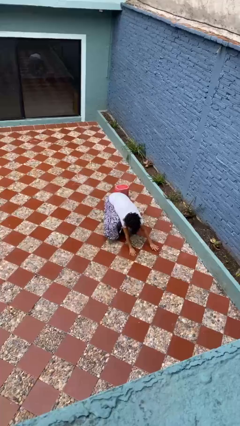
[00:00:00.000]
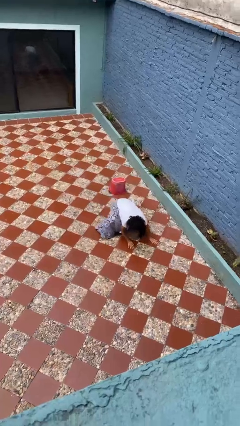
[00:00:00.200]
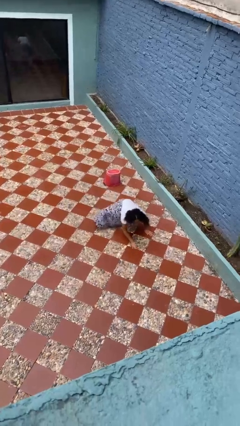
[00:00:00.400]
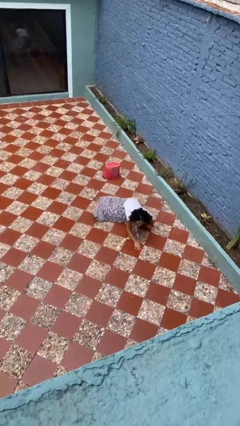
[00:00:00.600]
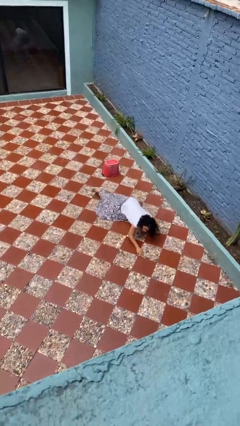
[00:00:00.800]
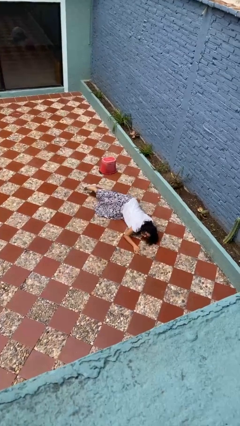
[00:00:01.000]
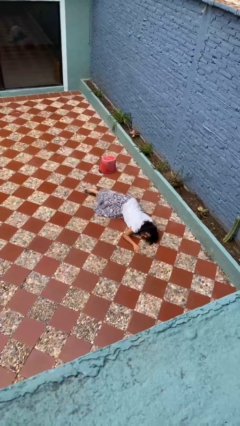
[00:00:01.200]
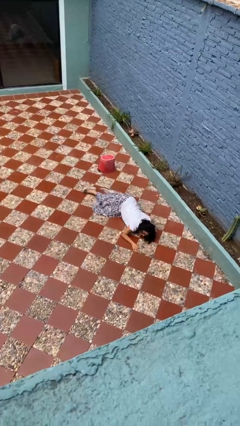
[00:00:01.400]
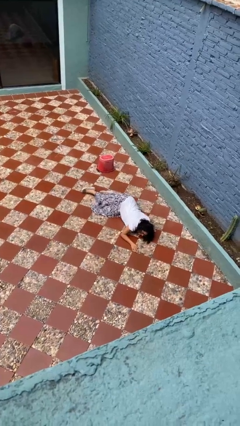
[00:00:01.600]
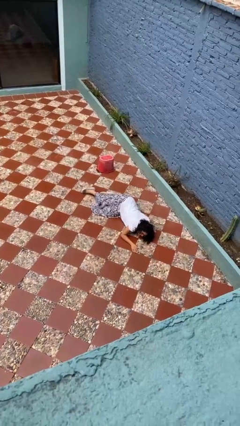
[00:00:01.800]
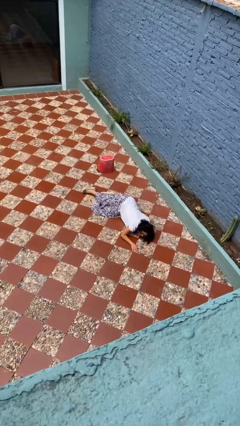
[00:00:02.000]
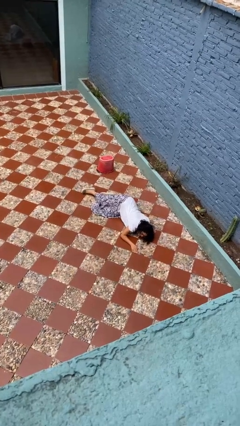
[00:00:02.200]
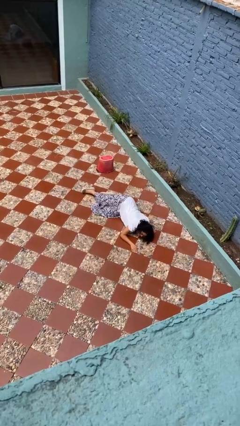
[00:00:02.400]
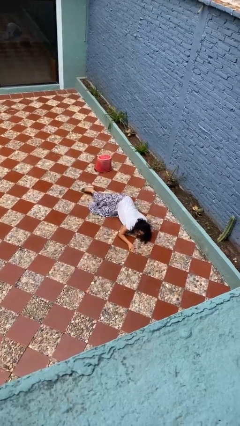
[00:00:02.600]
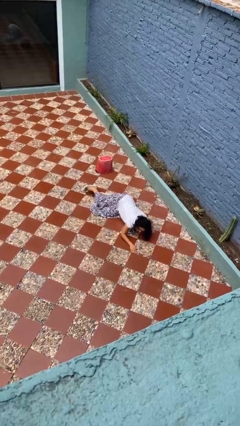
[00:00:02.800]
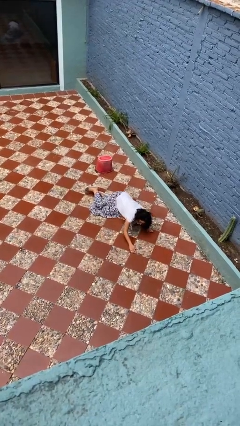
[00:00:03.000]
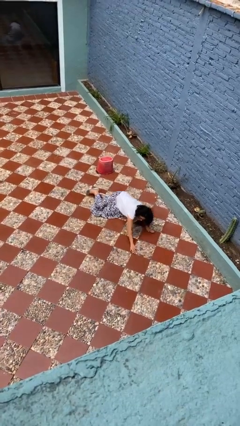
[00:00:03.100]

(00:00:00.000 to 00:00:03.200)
person lies down on floor

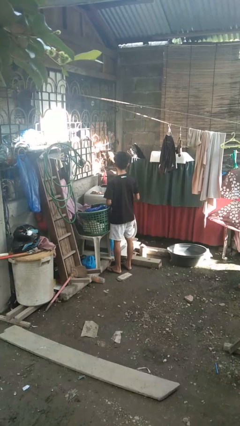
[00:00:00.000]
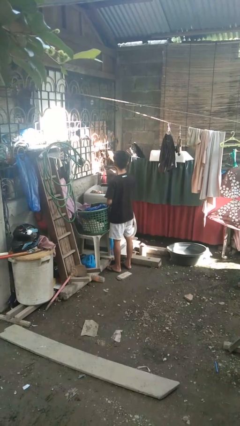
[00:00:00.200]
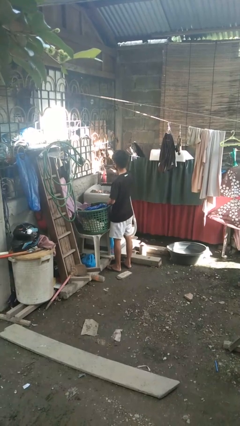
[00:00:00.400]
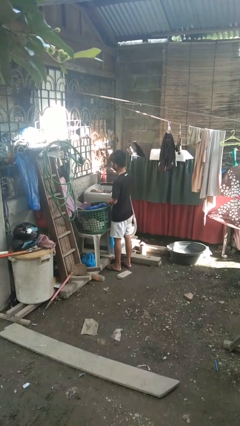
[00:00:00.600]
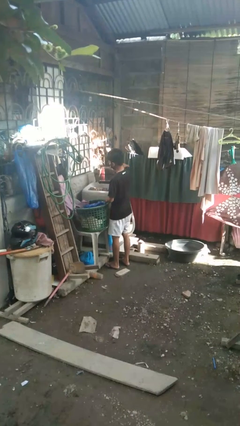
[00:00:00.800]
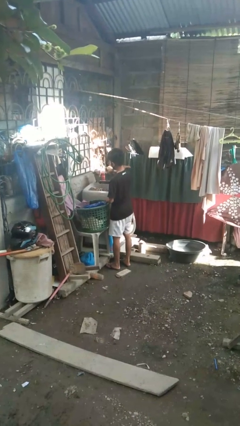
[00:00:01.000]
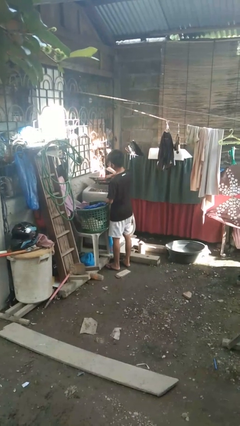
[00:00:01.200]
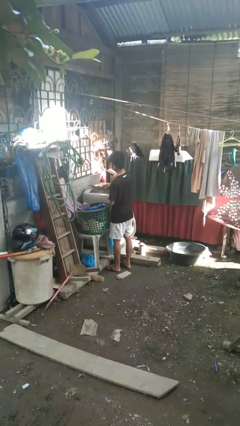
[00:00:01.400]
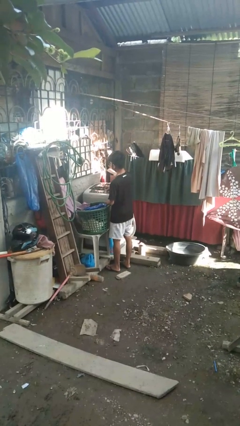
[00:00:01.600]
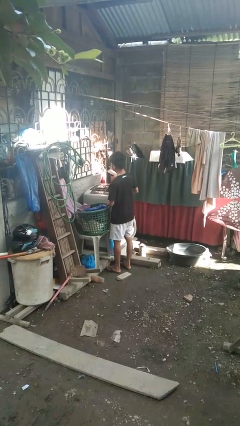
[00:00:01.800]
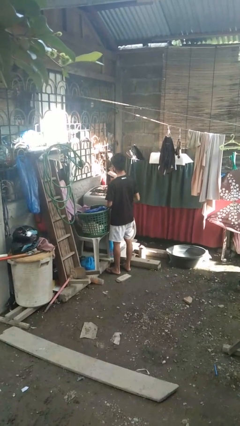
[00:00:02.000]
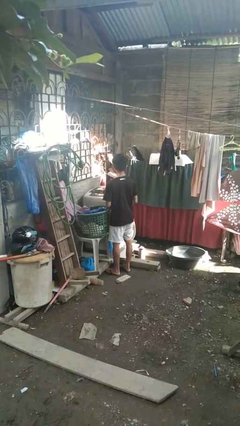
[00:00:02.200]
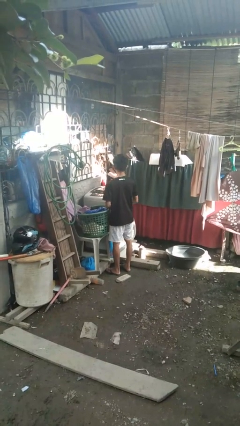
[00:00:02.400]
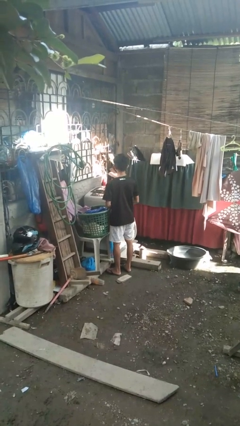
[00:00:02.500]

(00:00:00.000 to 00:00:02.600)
person closes clothes washer

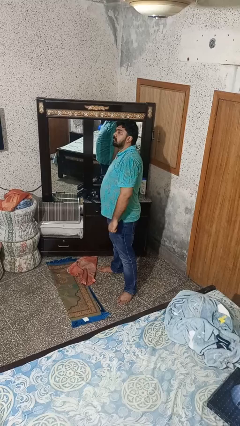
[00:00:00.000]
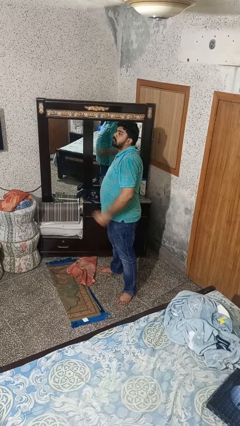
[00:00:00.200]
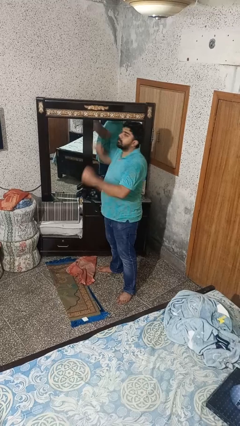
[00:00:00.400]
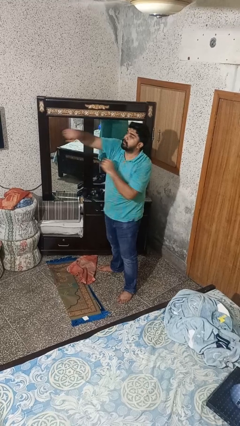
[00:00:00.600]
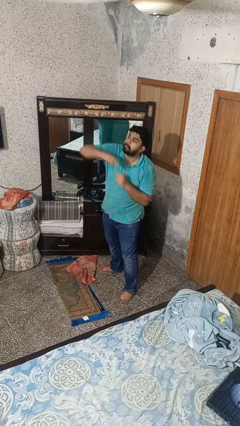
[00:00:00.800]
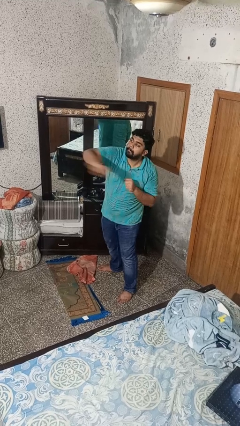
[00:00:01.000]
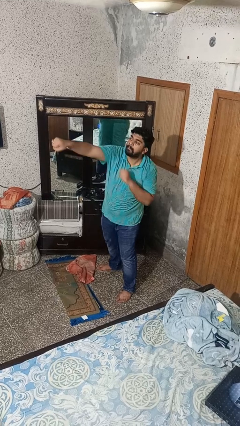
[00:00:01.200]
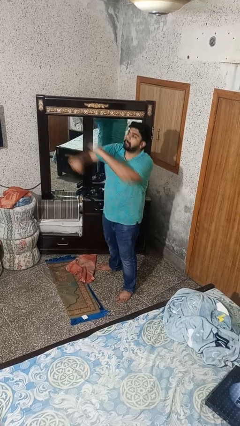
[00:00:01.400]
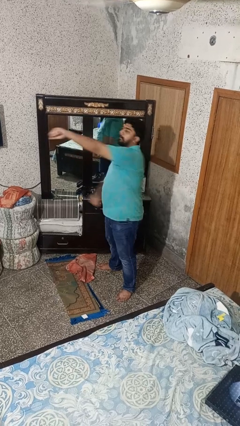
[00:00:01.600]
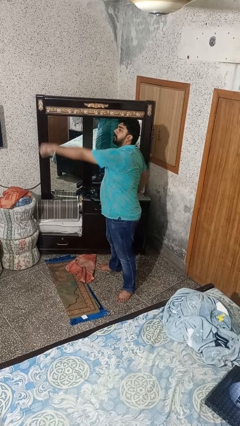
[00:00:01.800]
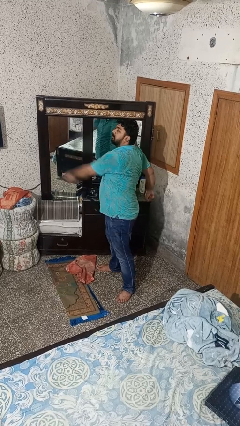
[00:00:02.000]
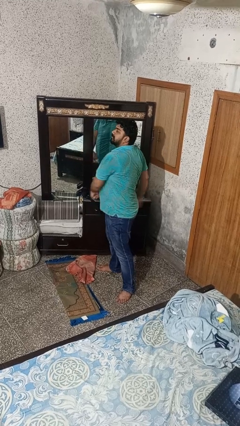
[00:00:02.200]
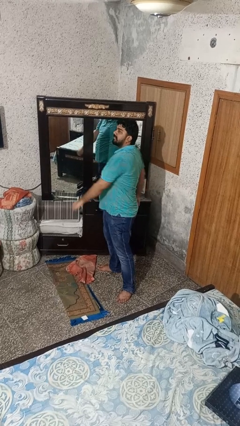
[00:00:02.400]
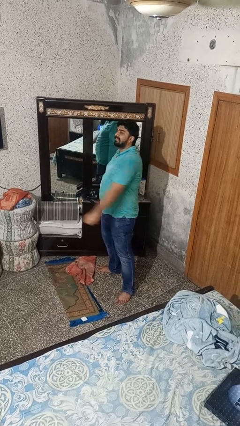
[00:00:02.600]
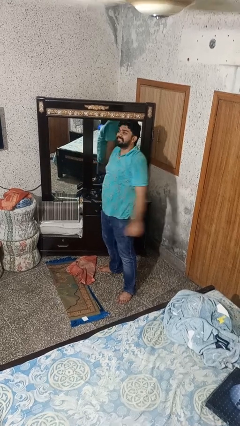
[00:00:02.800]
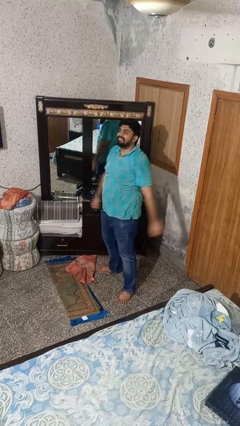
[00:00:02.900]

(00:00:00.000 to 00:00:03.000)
person punches

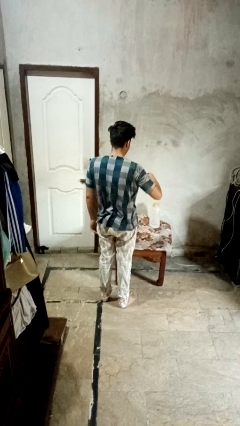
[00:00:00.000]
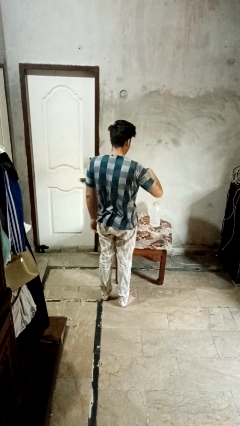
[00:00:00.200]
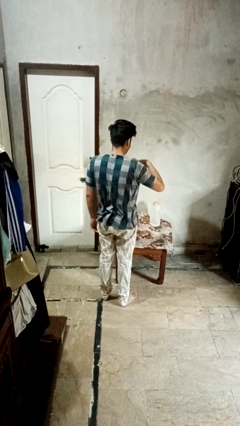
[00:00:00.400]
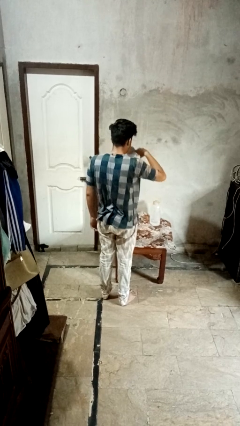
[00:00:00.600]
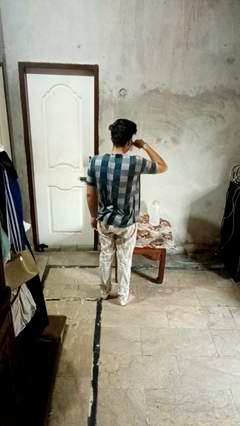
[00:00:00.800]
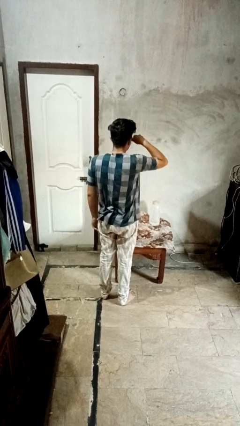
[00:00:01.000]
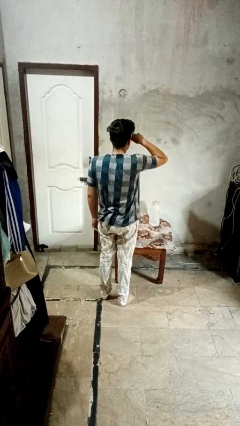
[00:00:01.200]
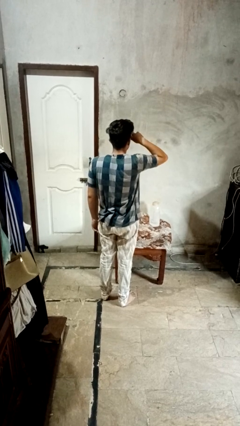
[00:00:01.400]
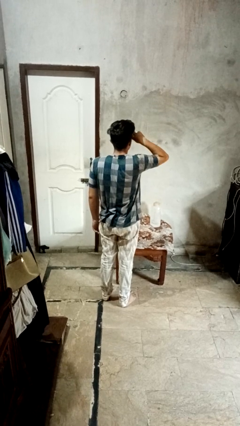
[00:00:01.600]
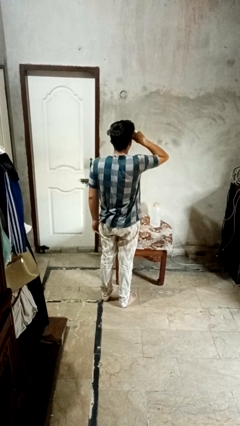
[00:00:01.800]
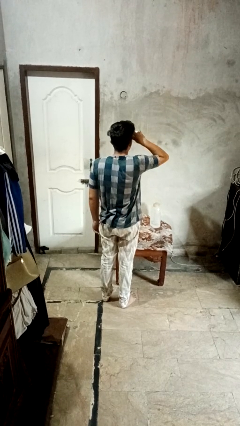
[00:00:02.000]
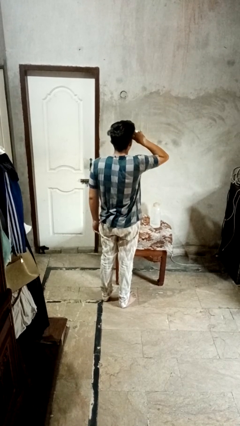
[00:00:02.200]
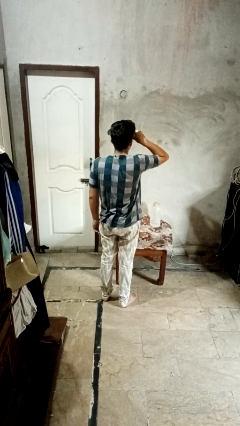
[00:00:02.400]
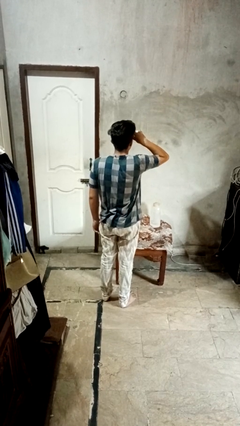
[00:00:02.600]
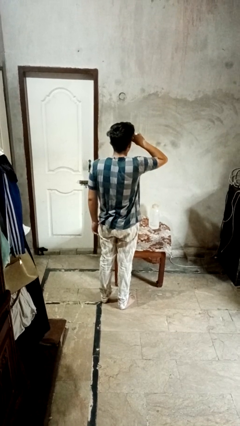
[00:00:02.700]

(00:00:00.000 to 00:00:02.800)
person drinks from mug

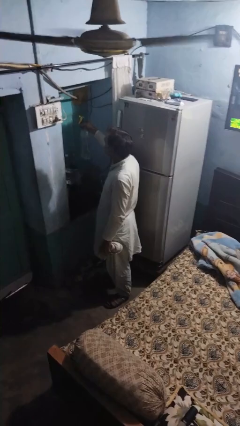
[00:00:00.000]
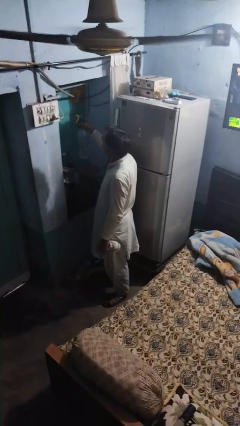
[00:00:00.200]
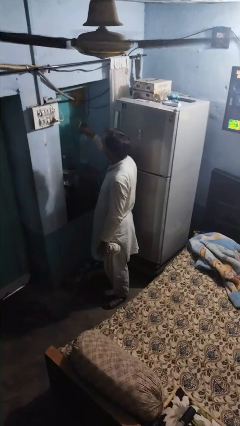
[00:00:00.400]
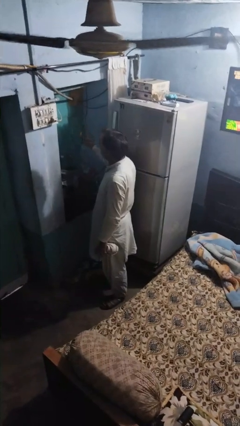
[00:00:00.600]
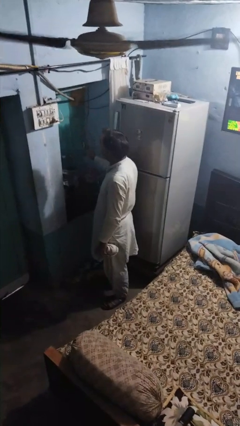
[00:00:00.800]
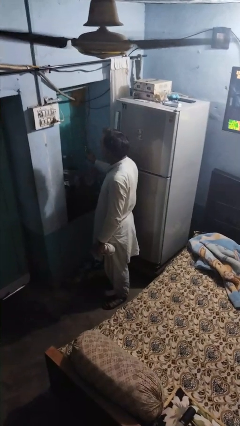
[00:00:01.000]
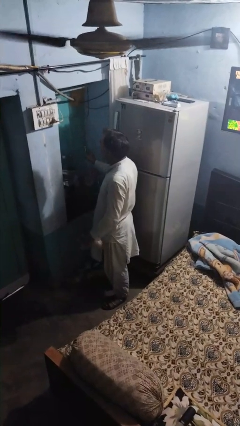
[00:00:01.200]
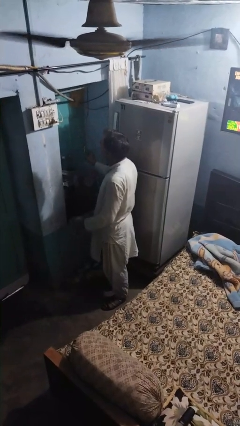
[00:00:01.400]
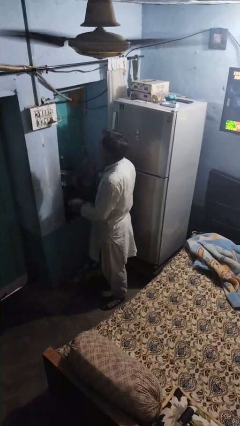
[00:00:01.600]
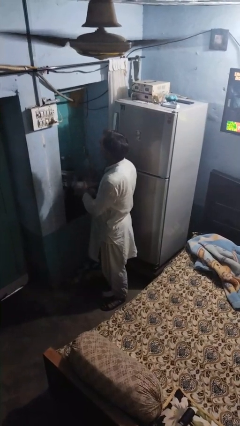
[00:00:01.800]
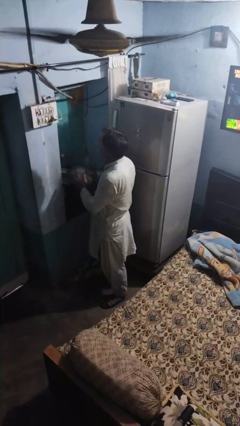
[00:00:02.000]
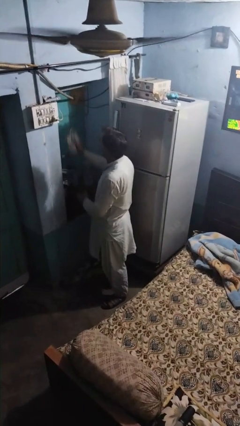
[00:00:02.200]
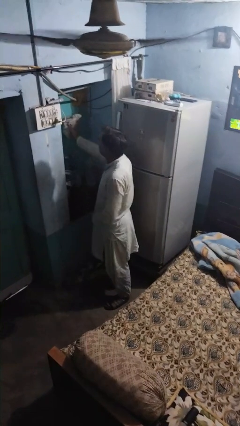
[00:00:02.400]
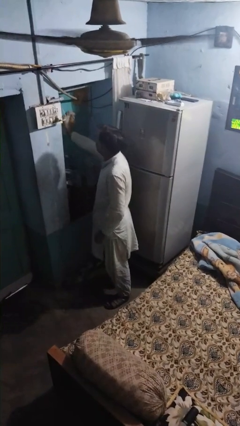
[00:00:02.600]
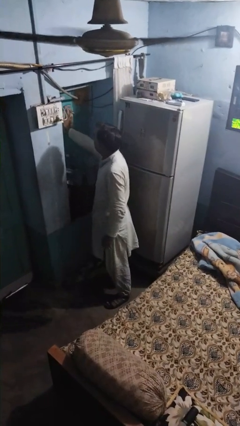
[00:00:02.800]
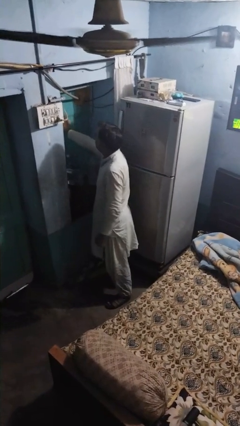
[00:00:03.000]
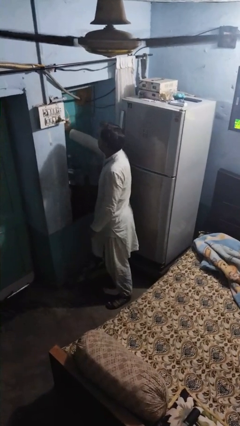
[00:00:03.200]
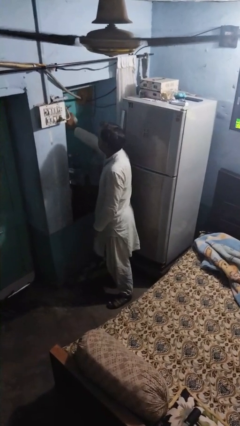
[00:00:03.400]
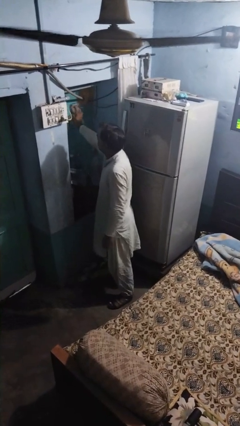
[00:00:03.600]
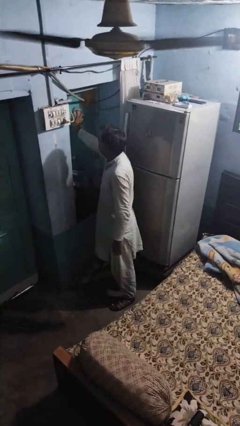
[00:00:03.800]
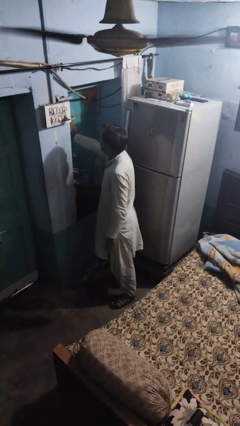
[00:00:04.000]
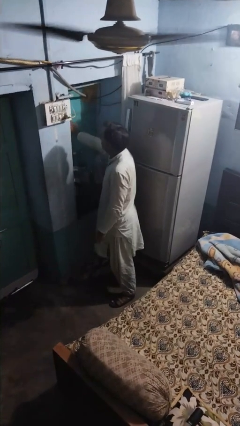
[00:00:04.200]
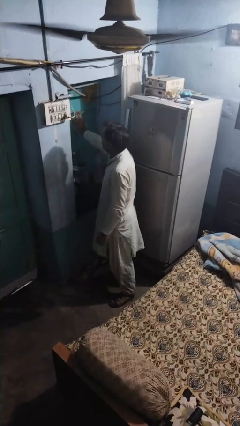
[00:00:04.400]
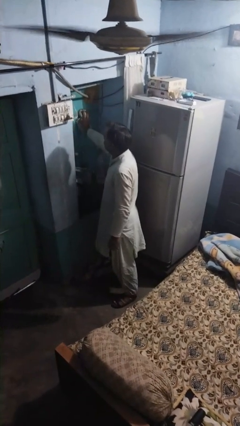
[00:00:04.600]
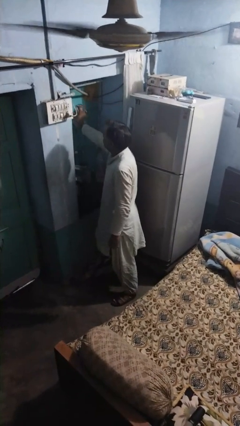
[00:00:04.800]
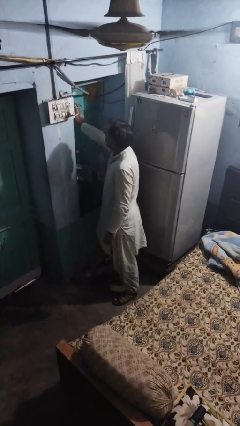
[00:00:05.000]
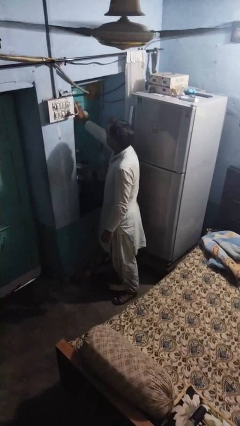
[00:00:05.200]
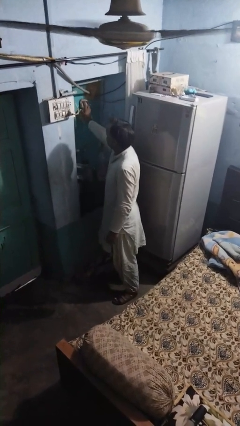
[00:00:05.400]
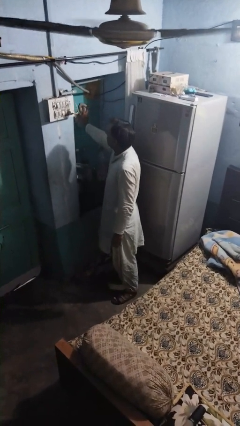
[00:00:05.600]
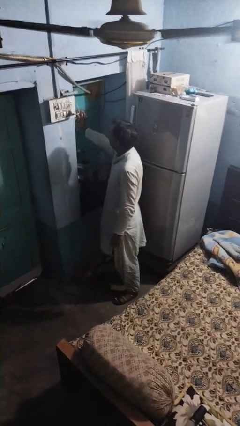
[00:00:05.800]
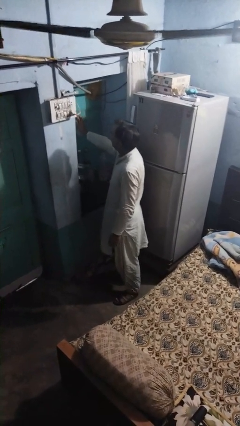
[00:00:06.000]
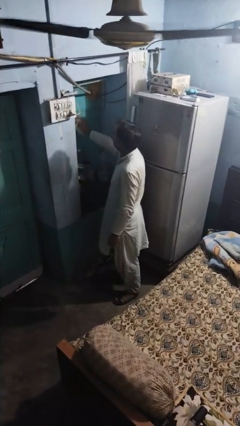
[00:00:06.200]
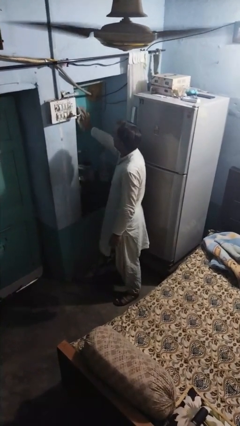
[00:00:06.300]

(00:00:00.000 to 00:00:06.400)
person washes window
